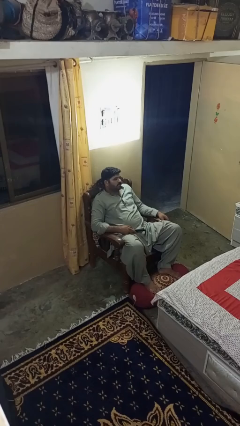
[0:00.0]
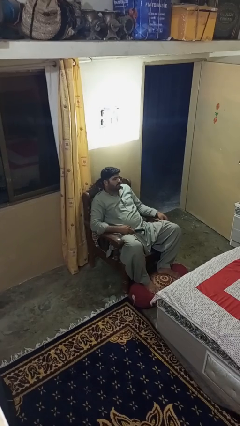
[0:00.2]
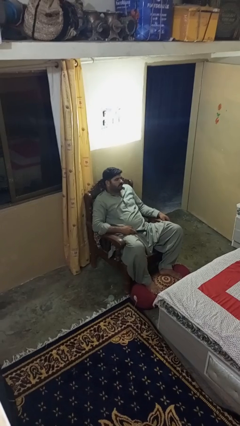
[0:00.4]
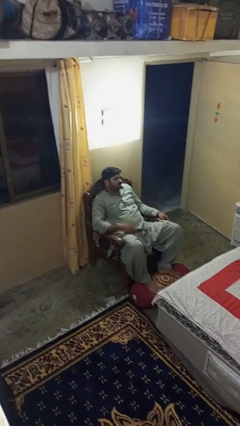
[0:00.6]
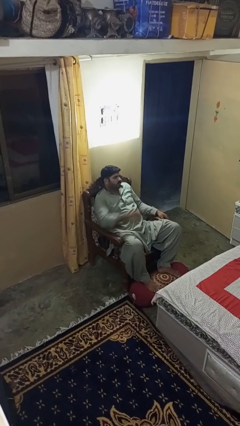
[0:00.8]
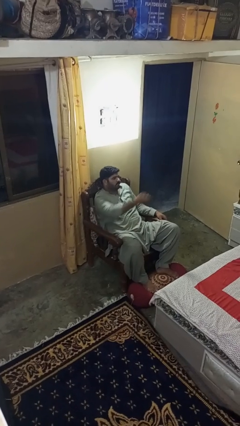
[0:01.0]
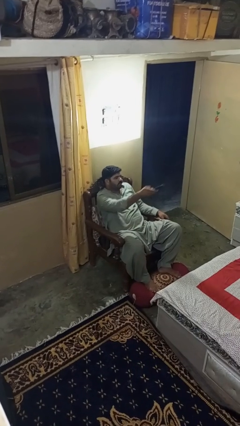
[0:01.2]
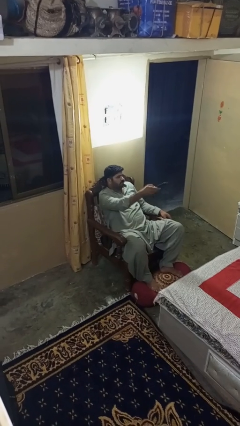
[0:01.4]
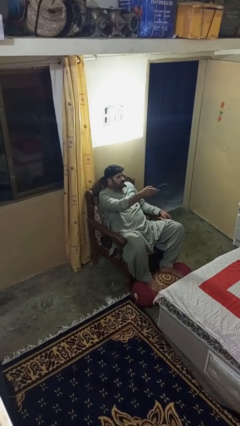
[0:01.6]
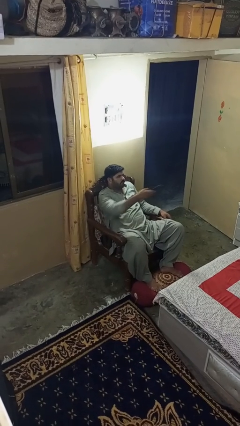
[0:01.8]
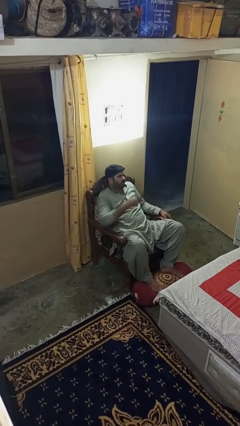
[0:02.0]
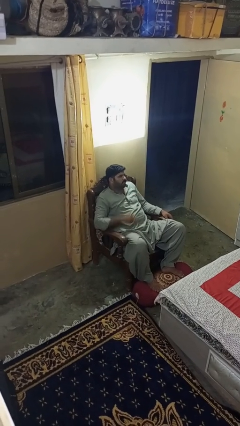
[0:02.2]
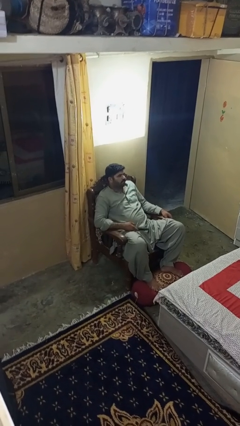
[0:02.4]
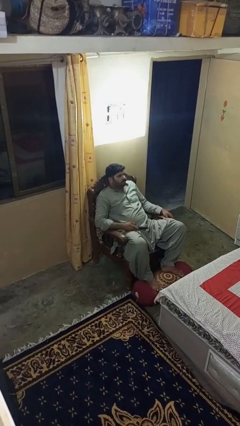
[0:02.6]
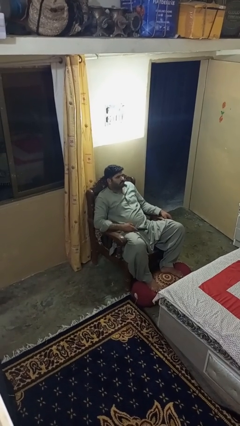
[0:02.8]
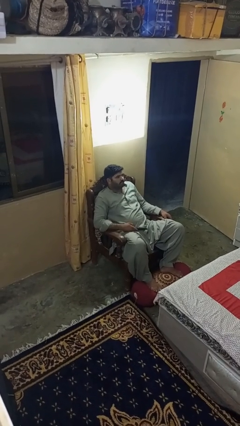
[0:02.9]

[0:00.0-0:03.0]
person uses television remote

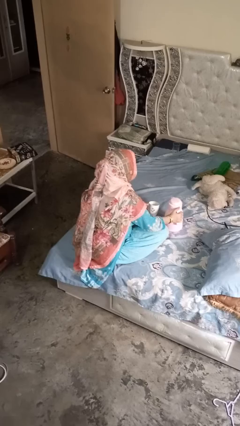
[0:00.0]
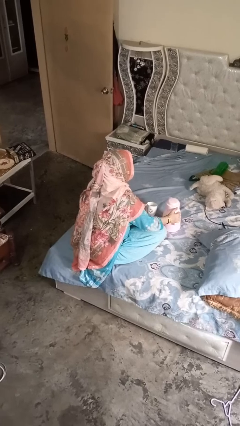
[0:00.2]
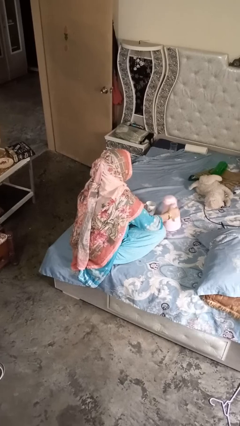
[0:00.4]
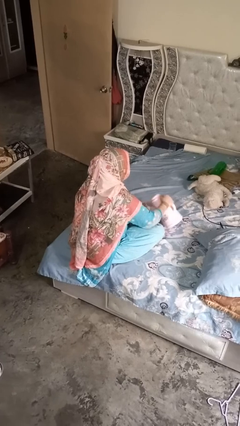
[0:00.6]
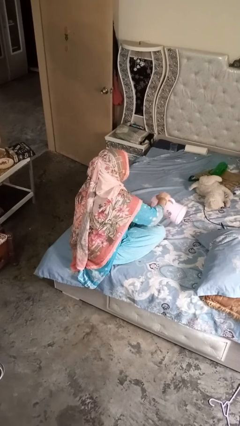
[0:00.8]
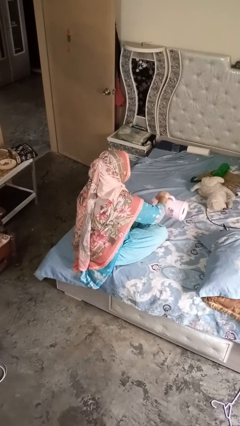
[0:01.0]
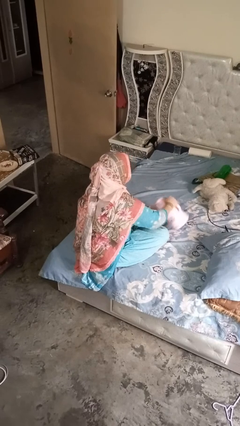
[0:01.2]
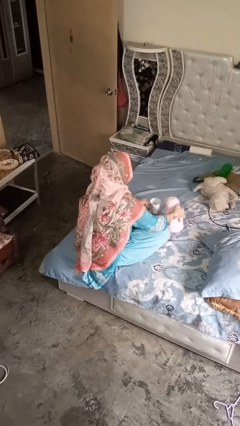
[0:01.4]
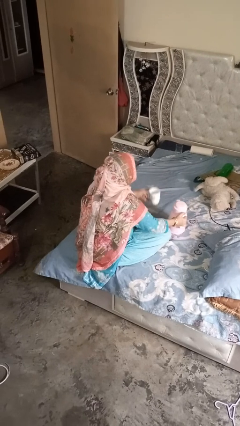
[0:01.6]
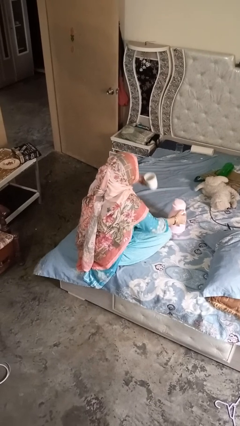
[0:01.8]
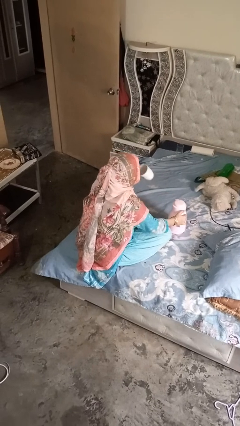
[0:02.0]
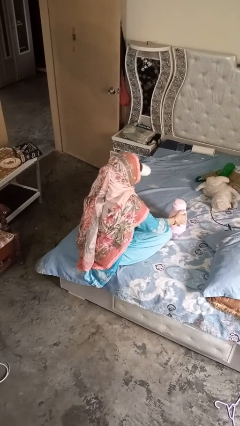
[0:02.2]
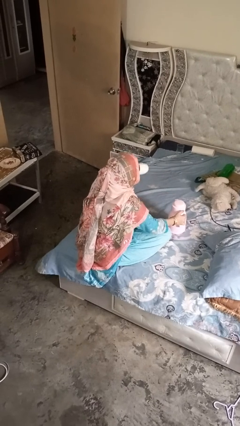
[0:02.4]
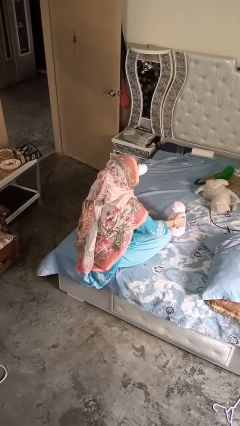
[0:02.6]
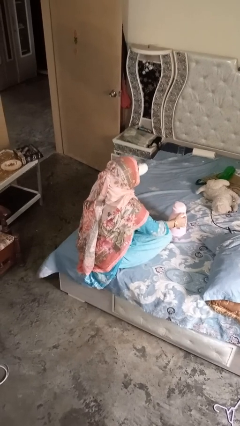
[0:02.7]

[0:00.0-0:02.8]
person pours coffee into mug

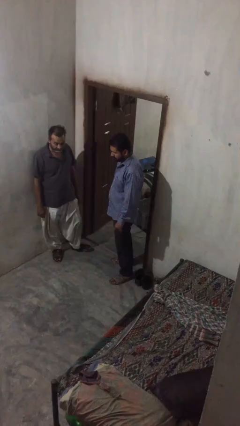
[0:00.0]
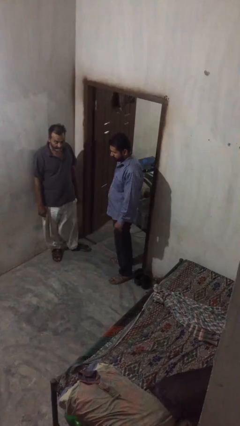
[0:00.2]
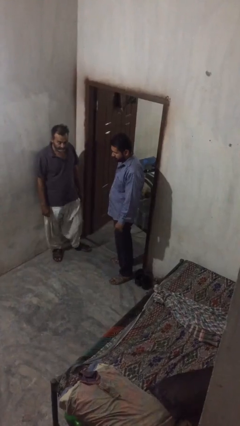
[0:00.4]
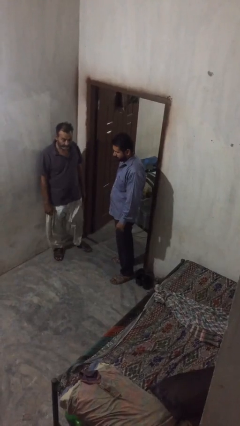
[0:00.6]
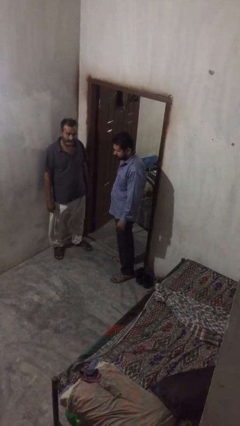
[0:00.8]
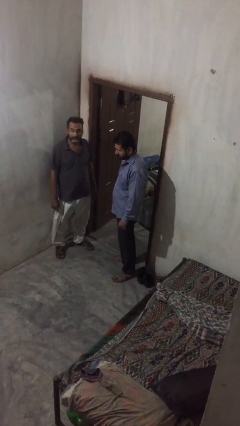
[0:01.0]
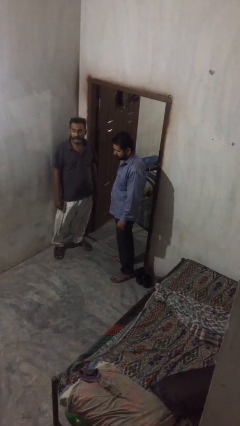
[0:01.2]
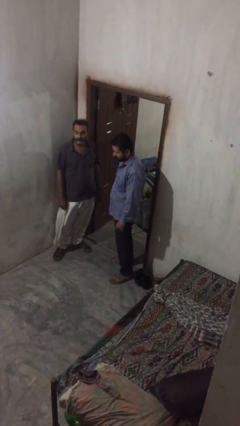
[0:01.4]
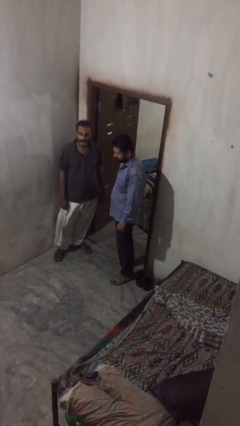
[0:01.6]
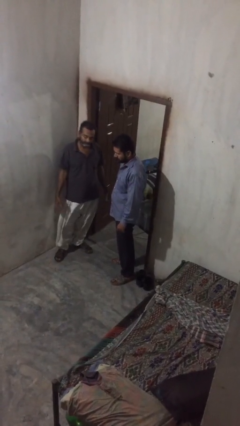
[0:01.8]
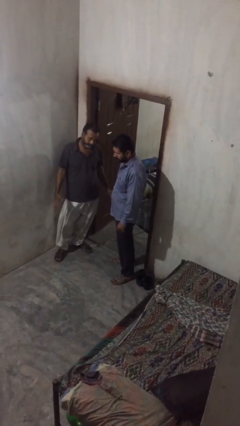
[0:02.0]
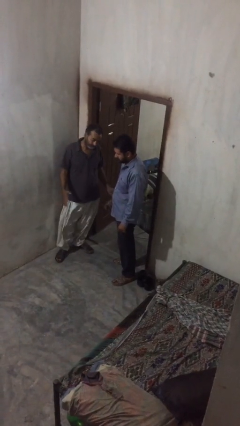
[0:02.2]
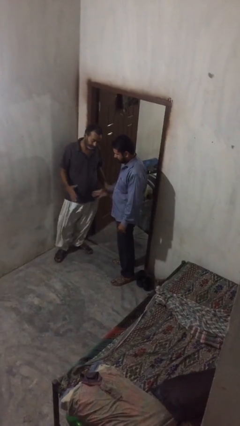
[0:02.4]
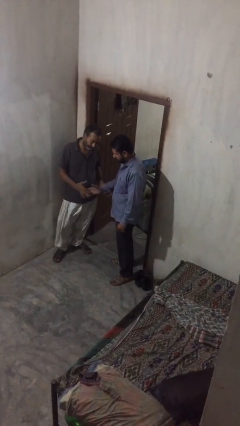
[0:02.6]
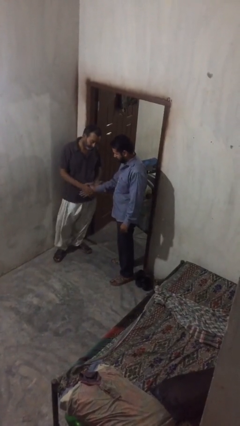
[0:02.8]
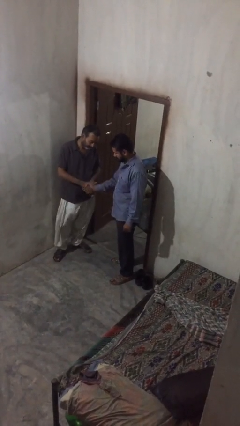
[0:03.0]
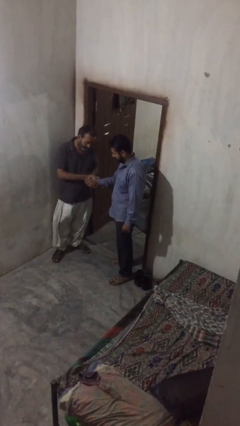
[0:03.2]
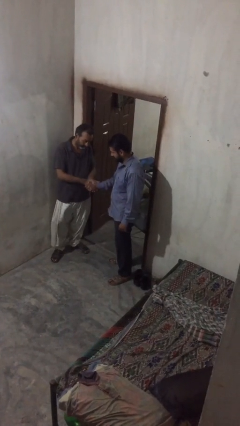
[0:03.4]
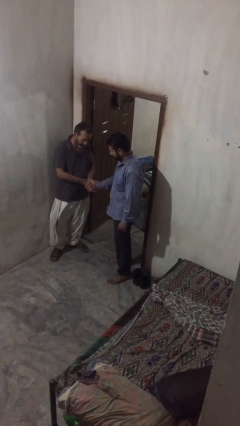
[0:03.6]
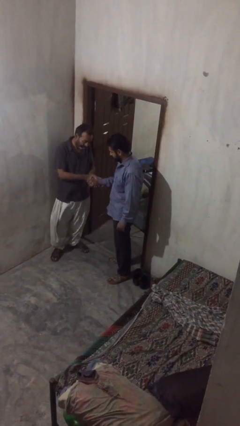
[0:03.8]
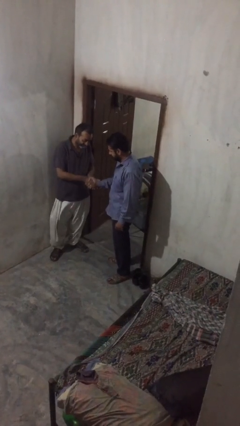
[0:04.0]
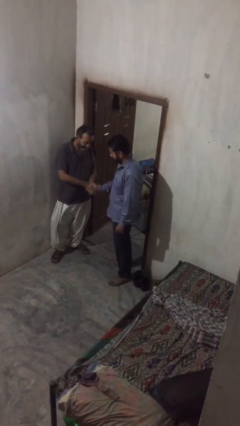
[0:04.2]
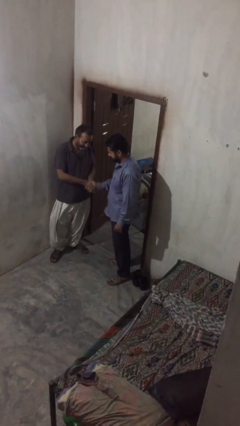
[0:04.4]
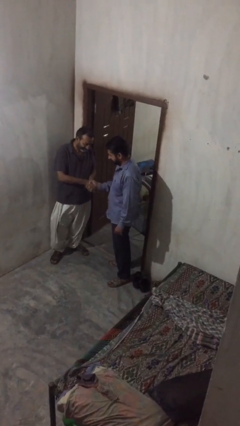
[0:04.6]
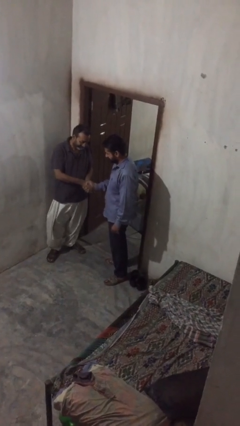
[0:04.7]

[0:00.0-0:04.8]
person shakes hand

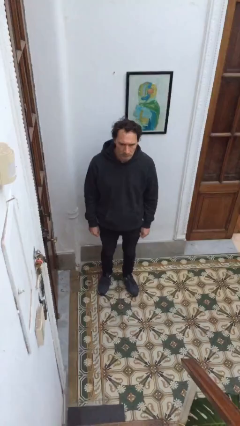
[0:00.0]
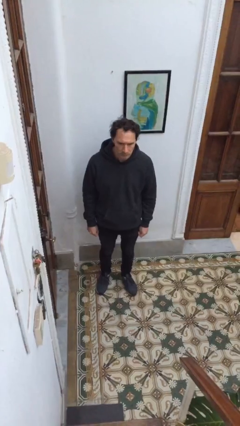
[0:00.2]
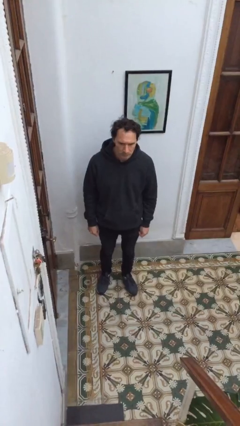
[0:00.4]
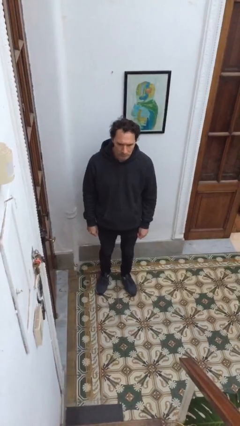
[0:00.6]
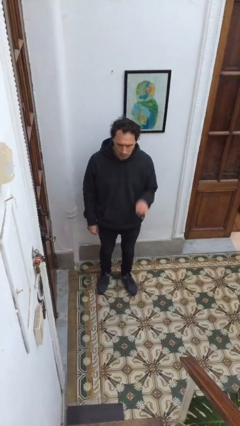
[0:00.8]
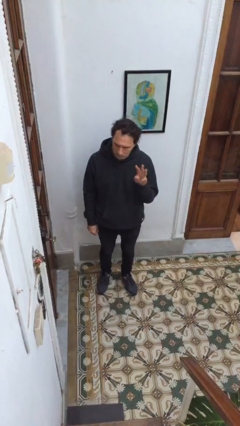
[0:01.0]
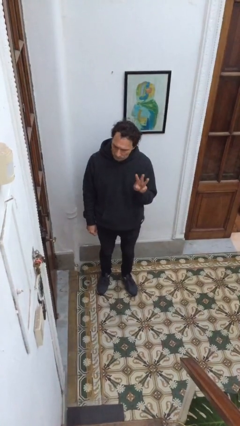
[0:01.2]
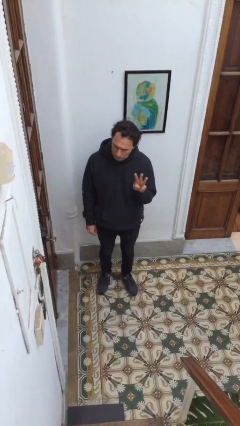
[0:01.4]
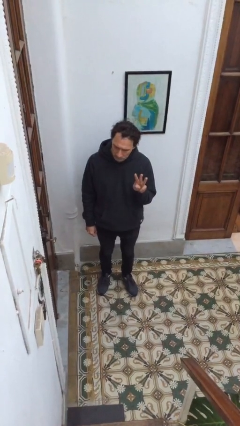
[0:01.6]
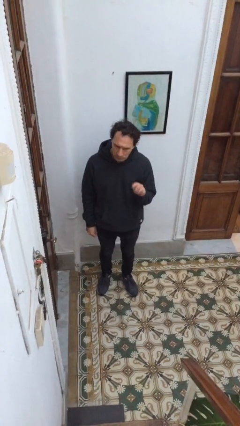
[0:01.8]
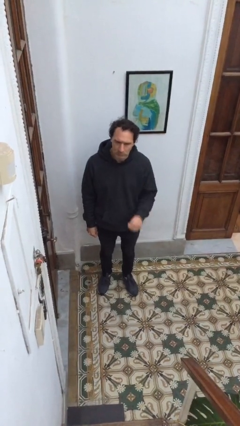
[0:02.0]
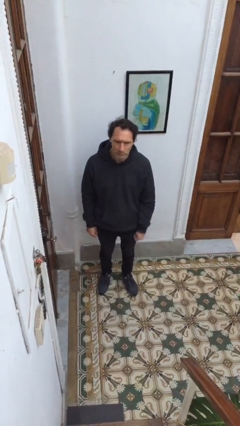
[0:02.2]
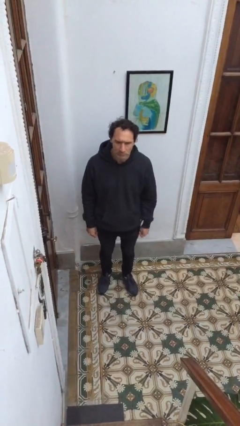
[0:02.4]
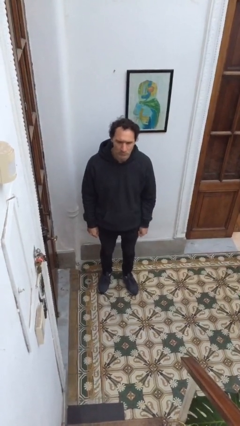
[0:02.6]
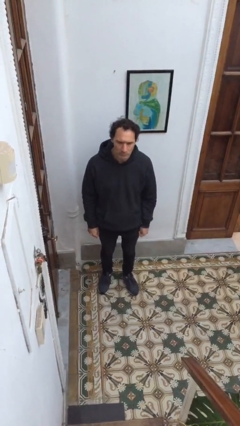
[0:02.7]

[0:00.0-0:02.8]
person gestures number three

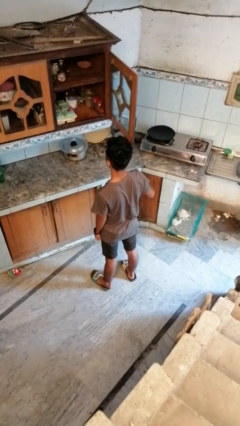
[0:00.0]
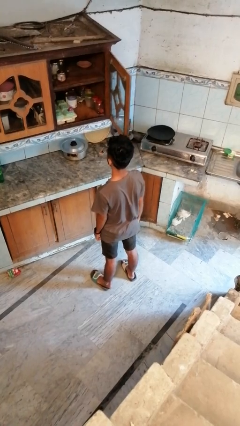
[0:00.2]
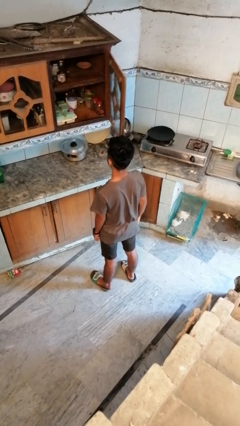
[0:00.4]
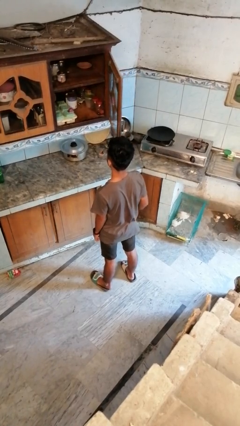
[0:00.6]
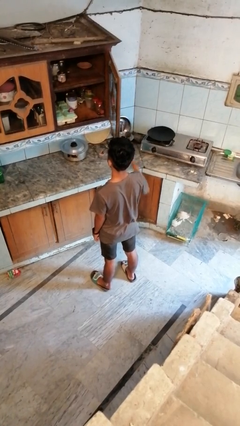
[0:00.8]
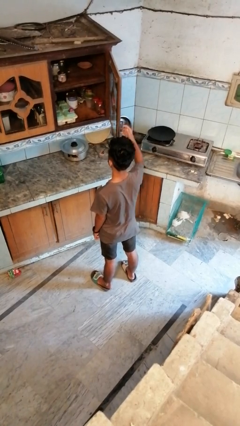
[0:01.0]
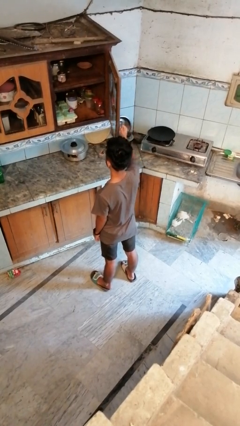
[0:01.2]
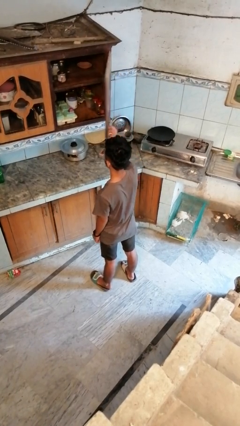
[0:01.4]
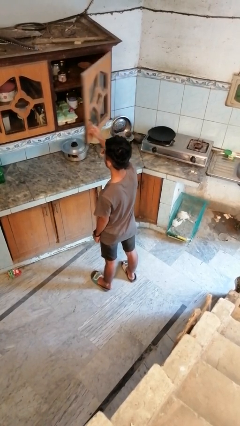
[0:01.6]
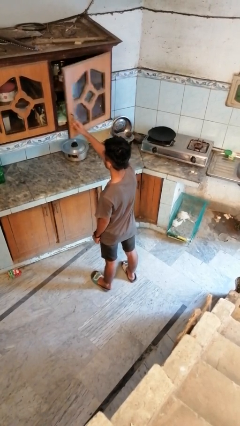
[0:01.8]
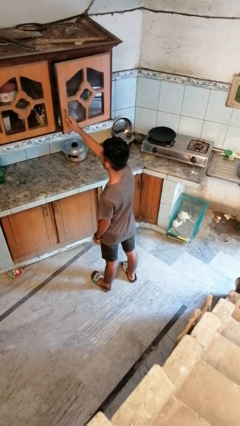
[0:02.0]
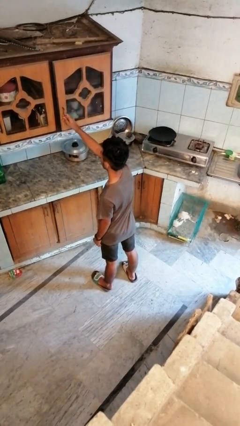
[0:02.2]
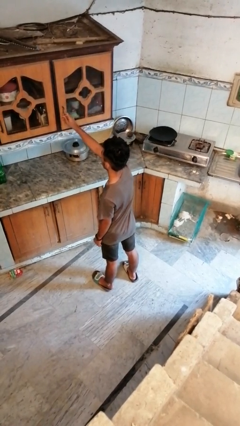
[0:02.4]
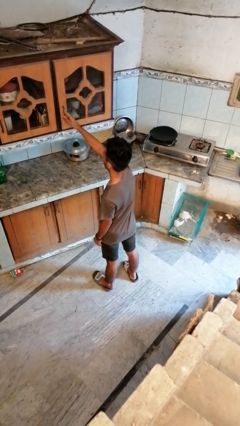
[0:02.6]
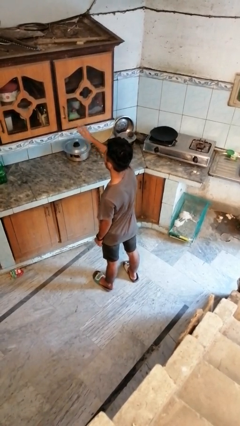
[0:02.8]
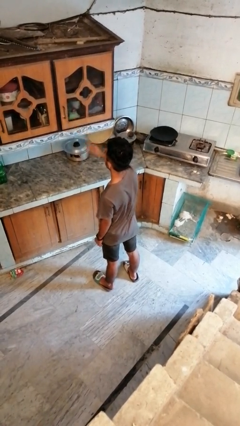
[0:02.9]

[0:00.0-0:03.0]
person closes cabinet

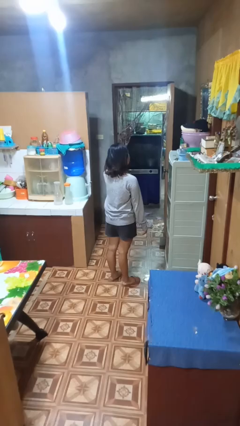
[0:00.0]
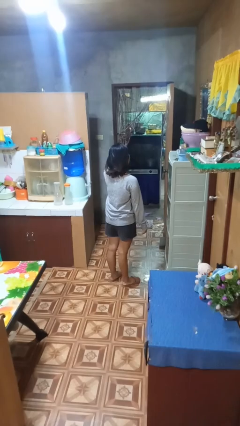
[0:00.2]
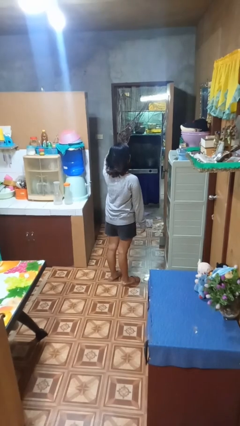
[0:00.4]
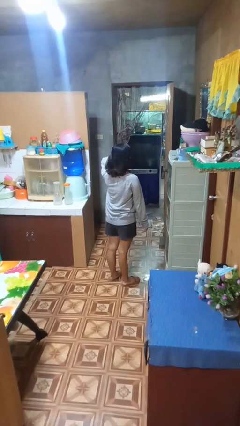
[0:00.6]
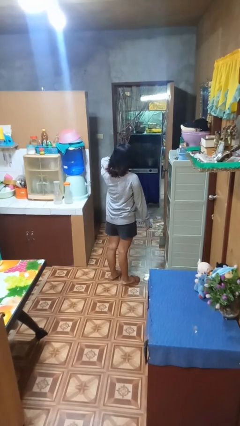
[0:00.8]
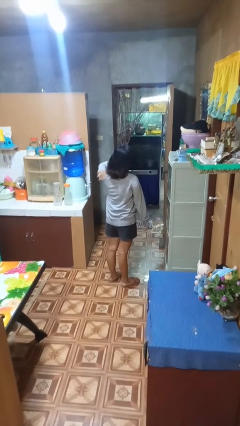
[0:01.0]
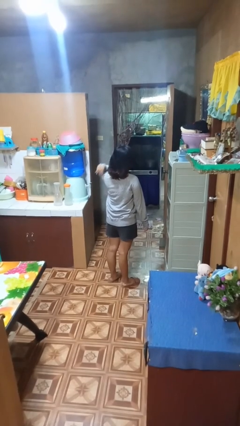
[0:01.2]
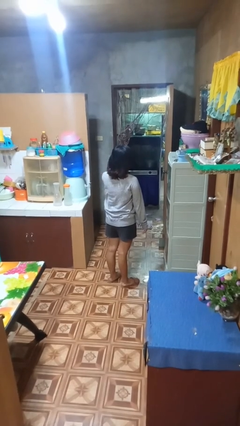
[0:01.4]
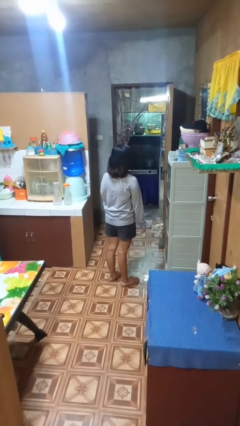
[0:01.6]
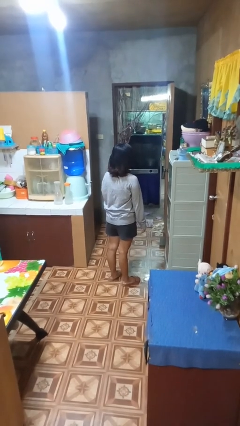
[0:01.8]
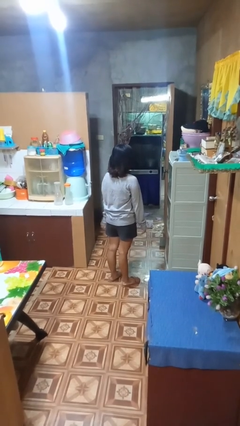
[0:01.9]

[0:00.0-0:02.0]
person strokes hair
